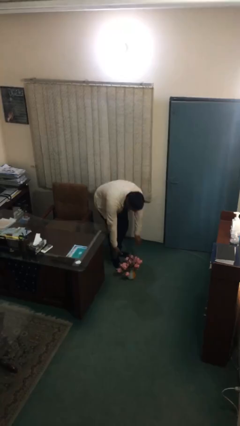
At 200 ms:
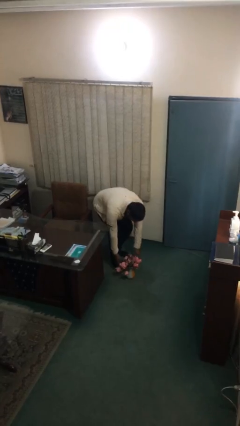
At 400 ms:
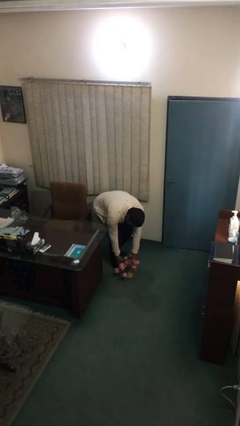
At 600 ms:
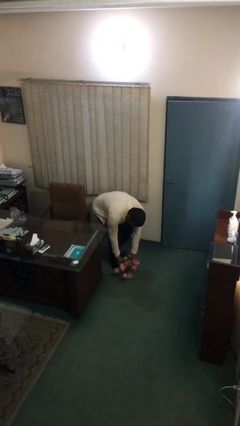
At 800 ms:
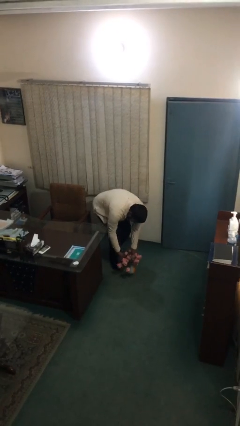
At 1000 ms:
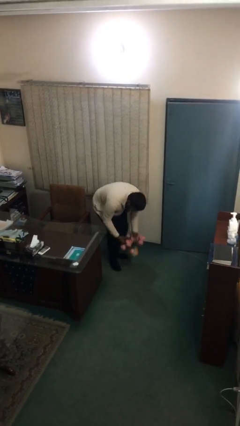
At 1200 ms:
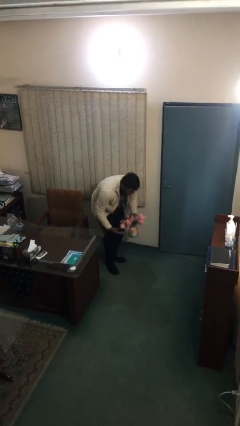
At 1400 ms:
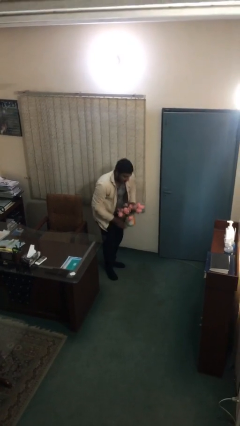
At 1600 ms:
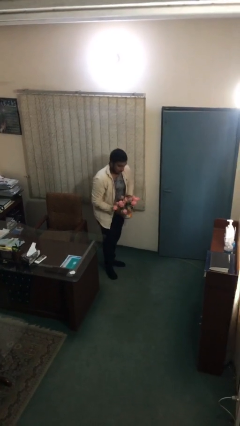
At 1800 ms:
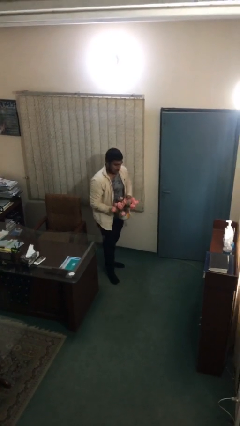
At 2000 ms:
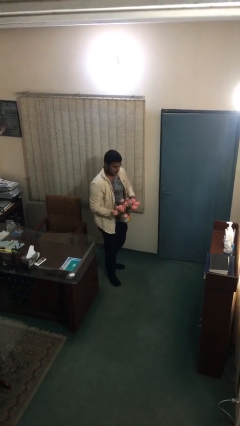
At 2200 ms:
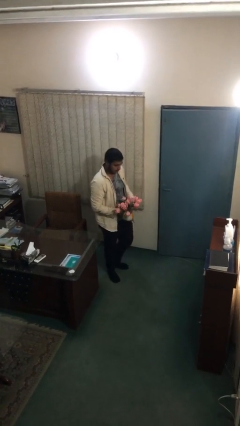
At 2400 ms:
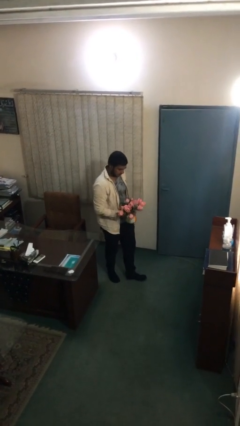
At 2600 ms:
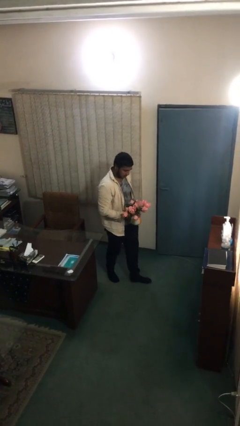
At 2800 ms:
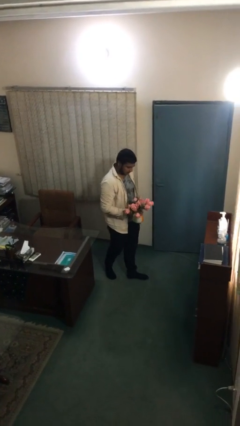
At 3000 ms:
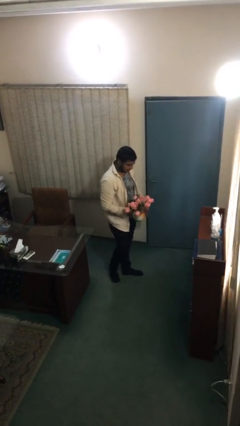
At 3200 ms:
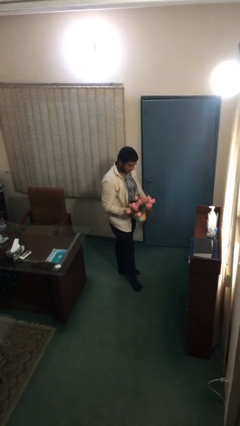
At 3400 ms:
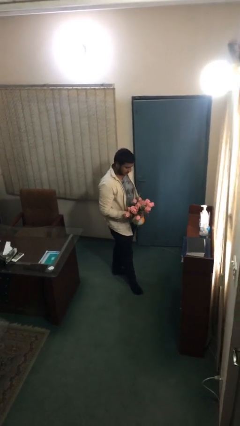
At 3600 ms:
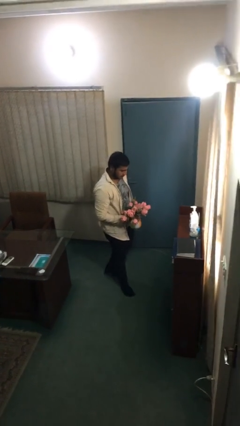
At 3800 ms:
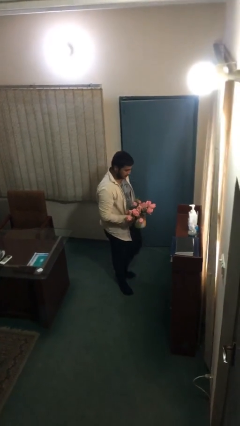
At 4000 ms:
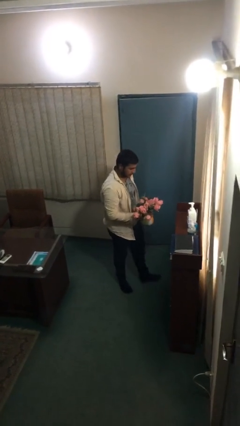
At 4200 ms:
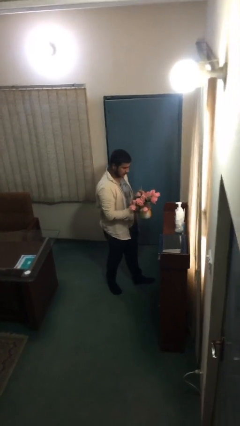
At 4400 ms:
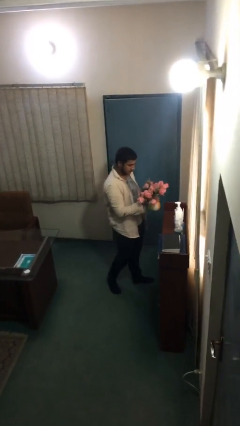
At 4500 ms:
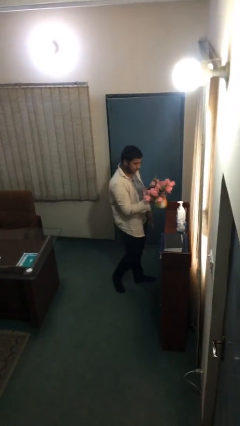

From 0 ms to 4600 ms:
person picks up object from floor

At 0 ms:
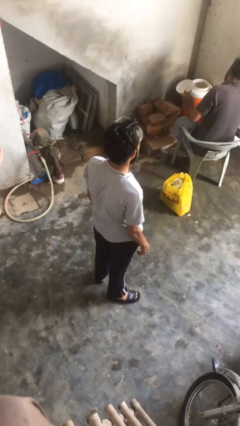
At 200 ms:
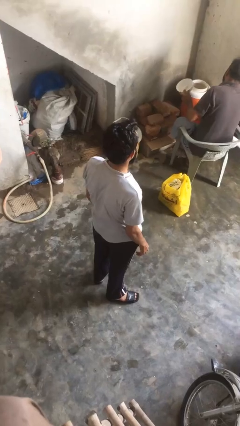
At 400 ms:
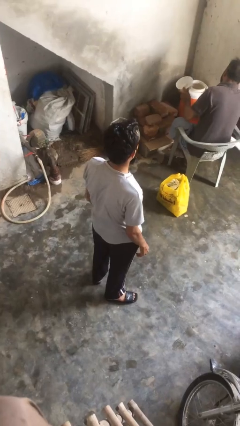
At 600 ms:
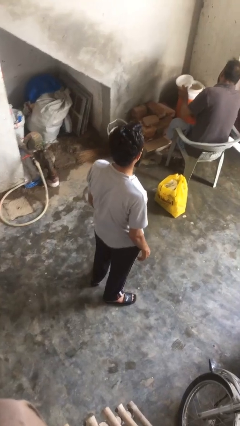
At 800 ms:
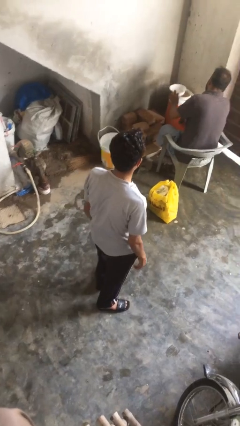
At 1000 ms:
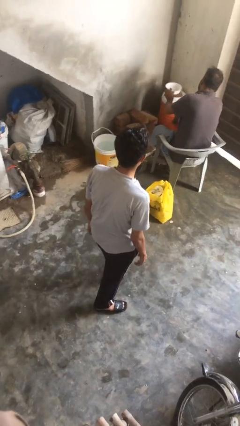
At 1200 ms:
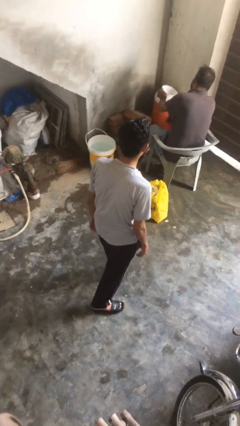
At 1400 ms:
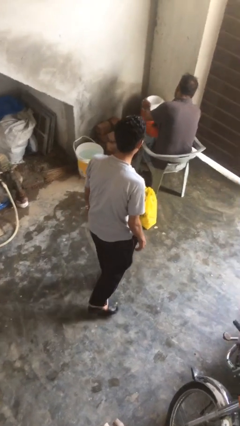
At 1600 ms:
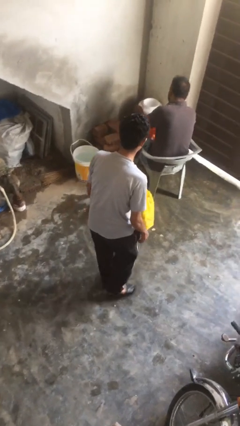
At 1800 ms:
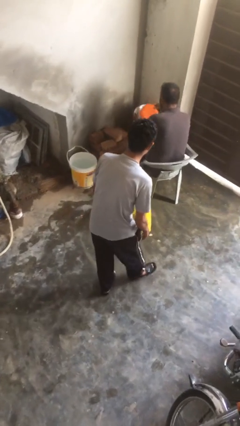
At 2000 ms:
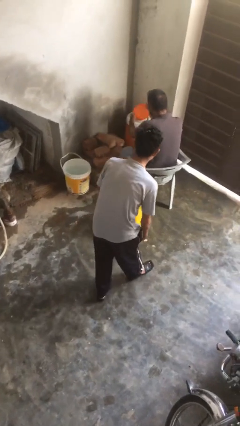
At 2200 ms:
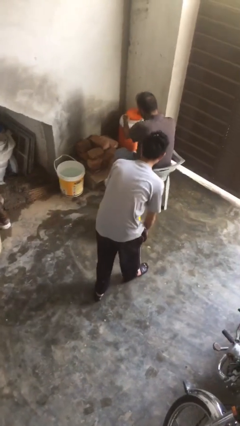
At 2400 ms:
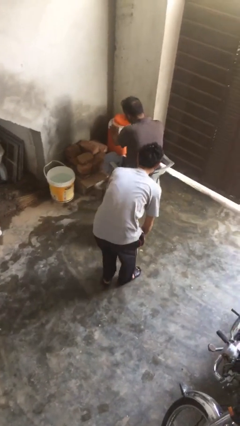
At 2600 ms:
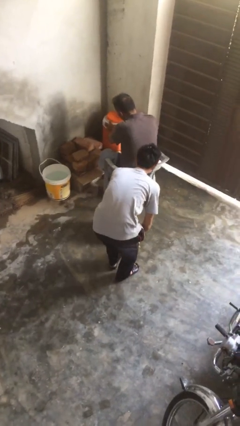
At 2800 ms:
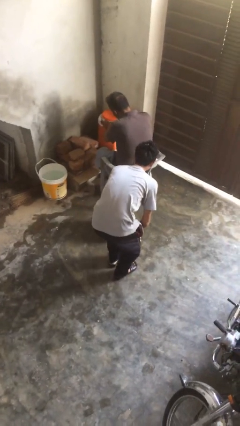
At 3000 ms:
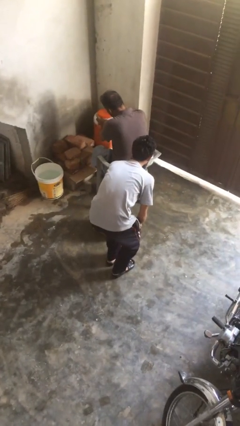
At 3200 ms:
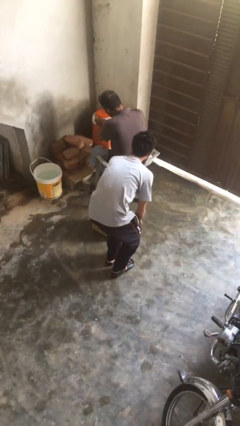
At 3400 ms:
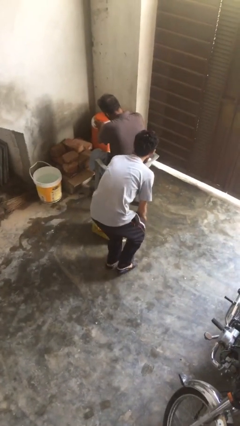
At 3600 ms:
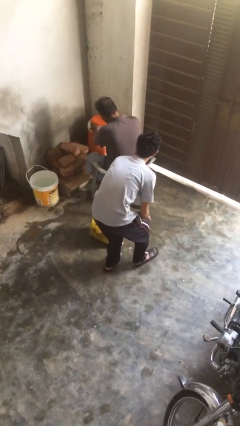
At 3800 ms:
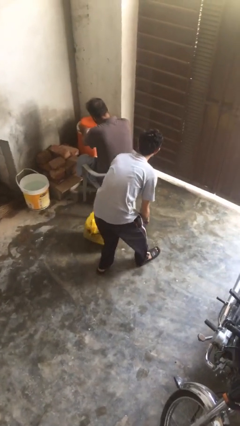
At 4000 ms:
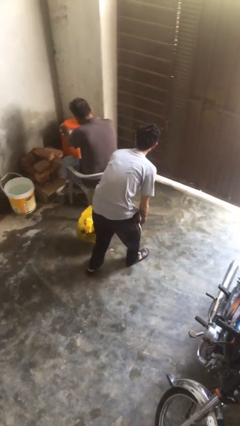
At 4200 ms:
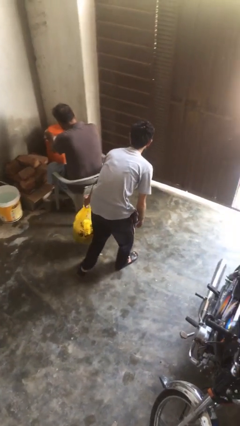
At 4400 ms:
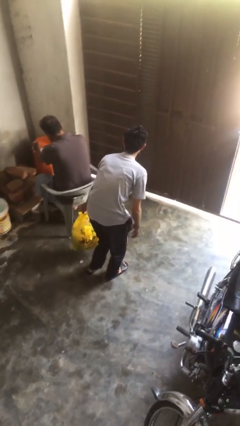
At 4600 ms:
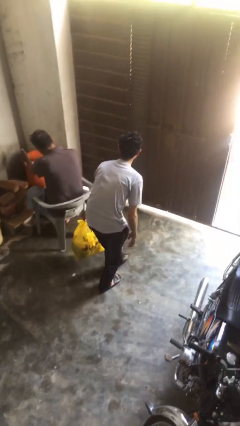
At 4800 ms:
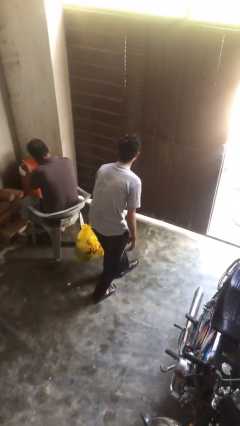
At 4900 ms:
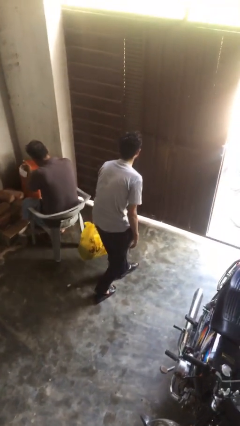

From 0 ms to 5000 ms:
person steals object from person

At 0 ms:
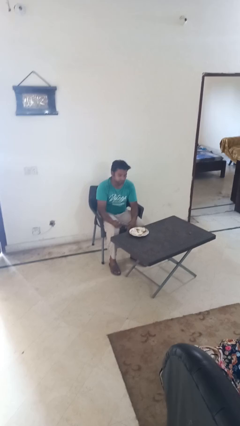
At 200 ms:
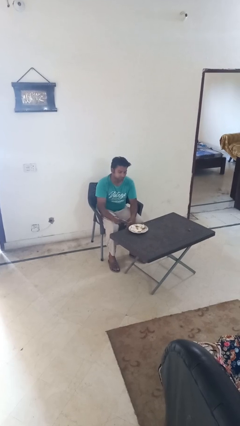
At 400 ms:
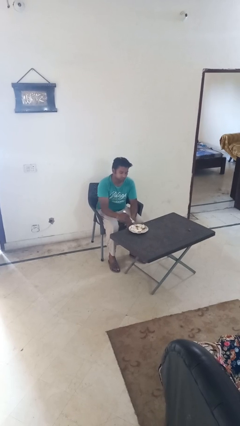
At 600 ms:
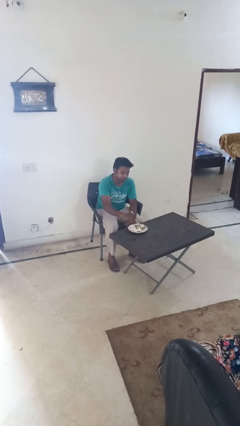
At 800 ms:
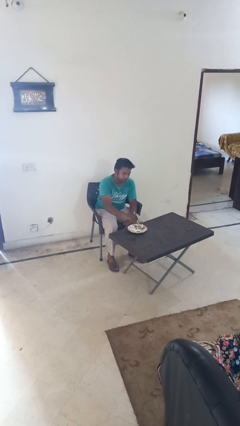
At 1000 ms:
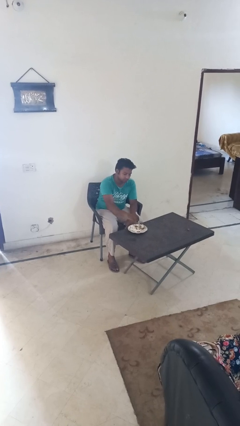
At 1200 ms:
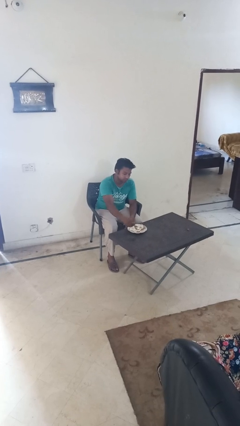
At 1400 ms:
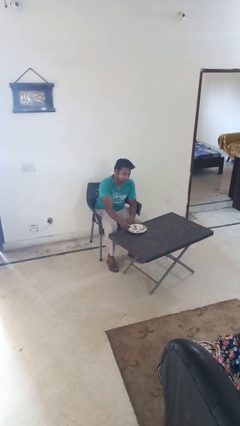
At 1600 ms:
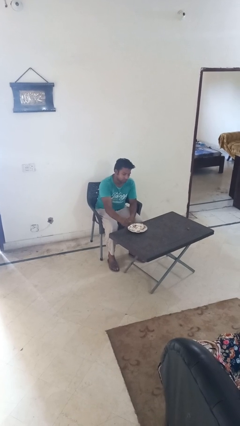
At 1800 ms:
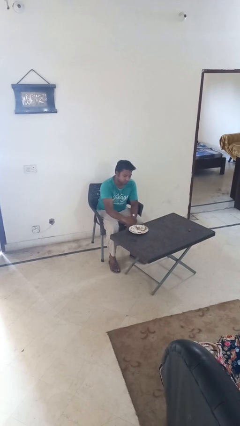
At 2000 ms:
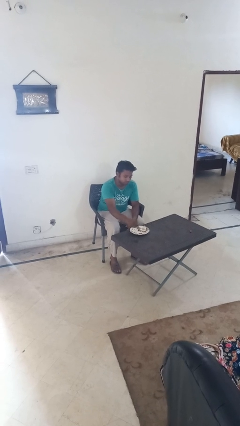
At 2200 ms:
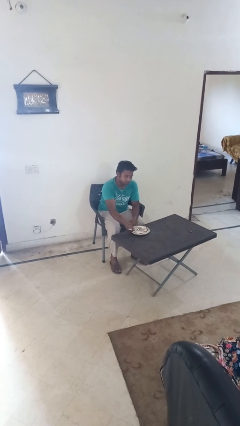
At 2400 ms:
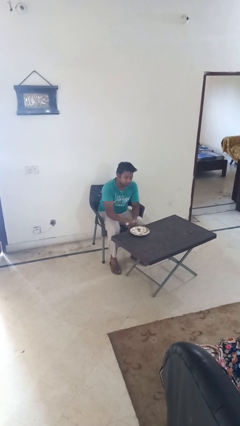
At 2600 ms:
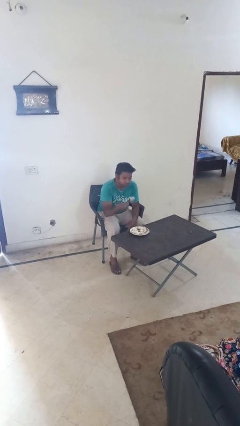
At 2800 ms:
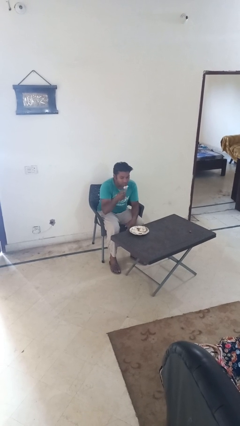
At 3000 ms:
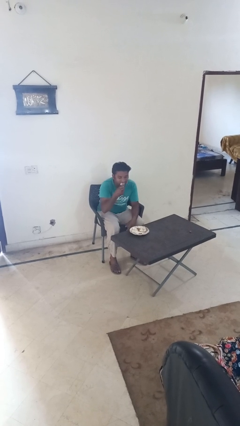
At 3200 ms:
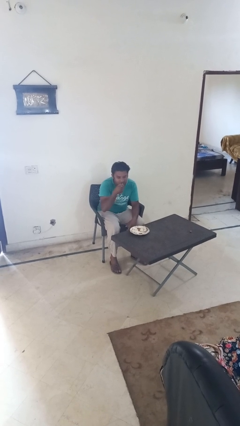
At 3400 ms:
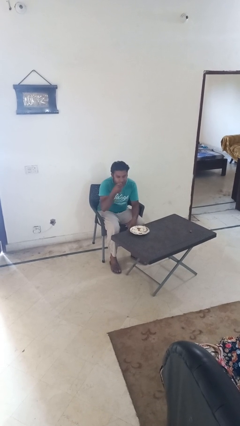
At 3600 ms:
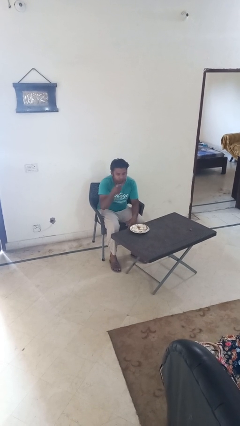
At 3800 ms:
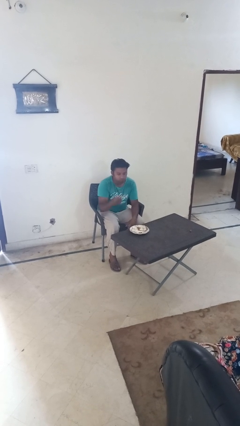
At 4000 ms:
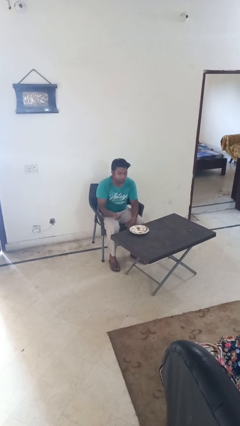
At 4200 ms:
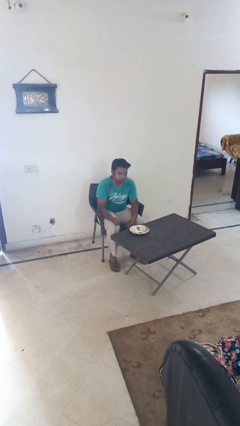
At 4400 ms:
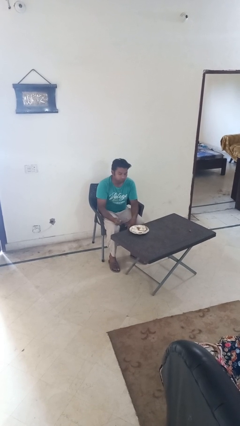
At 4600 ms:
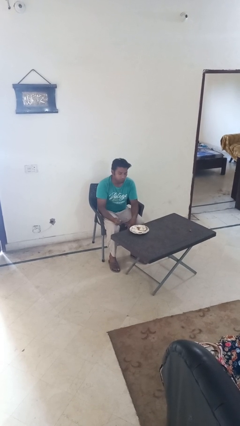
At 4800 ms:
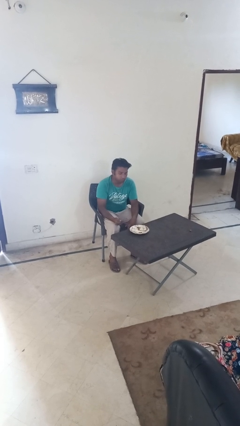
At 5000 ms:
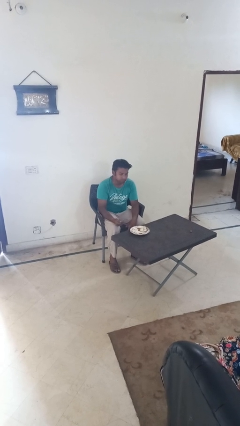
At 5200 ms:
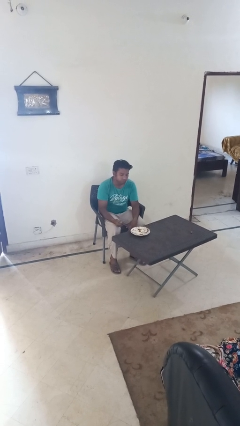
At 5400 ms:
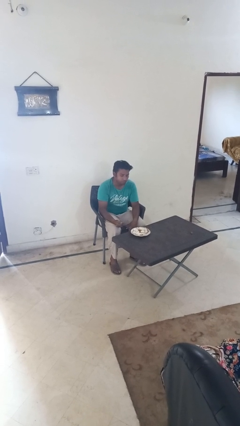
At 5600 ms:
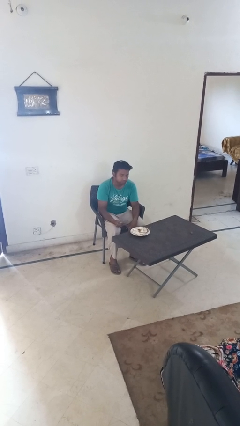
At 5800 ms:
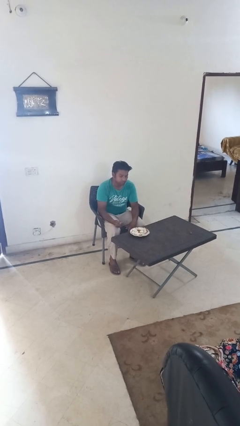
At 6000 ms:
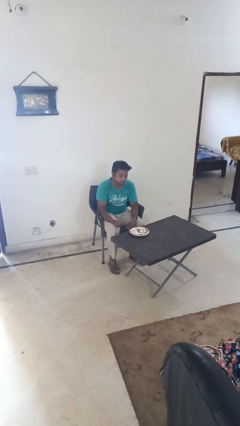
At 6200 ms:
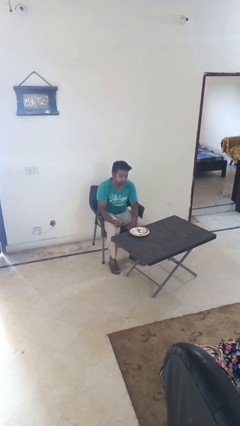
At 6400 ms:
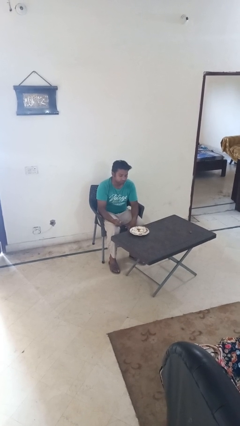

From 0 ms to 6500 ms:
person eats with utensil

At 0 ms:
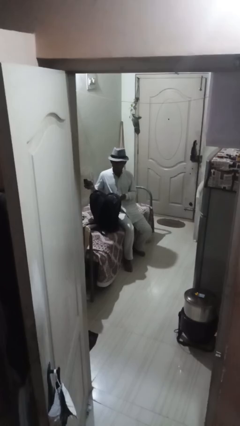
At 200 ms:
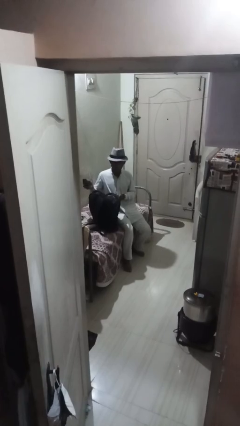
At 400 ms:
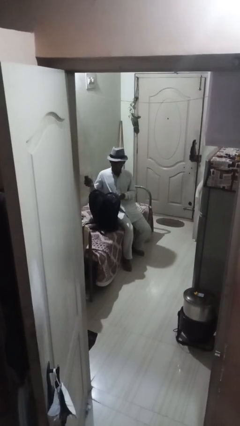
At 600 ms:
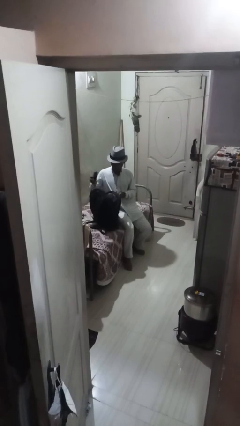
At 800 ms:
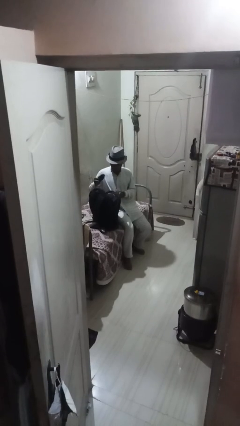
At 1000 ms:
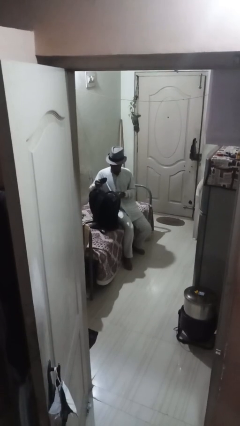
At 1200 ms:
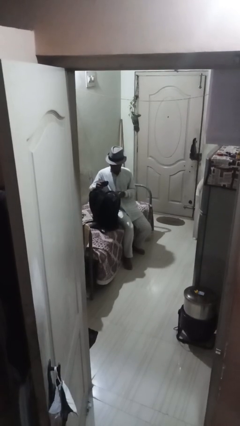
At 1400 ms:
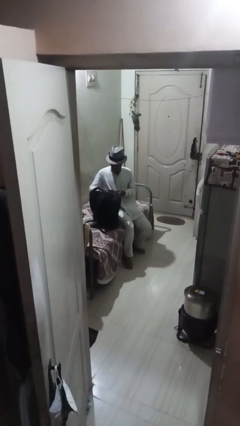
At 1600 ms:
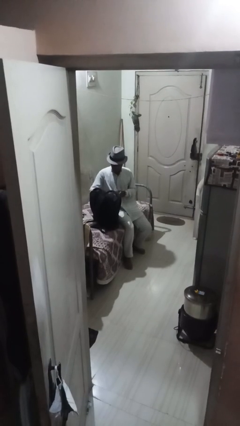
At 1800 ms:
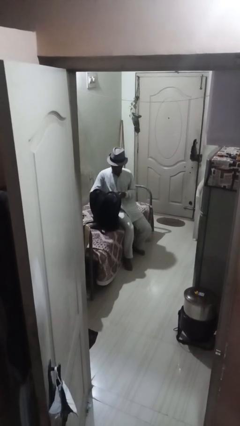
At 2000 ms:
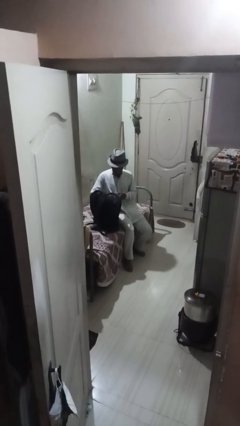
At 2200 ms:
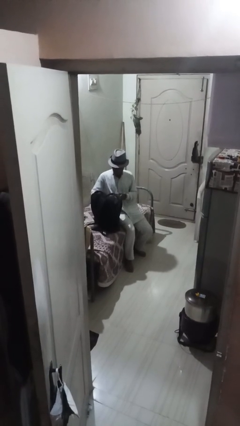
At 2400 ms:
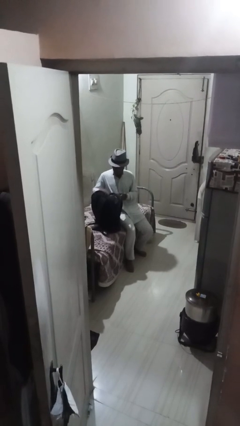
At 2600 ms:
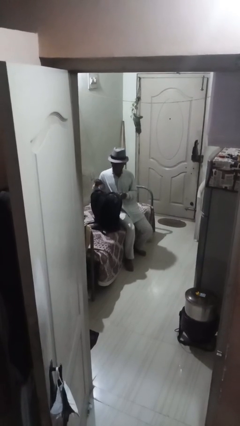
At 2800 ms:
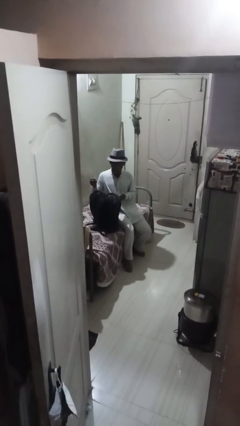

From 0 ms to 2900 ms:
person puts object into backpack
